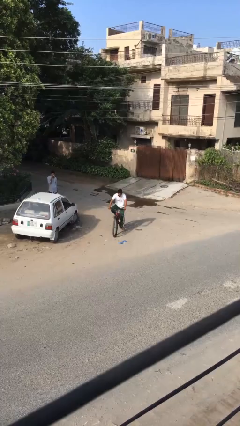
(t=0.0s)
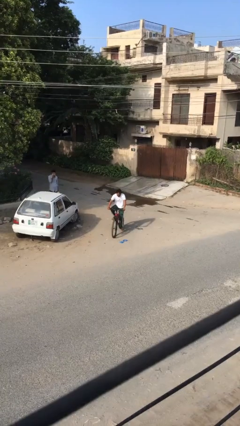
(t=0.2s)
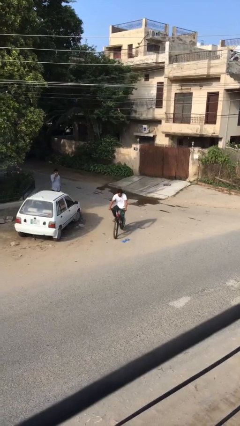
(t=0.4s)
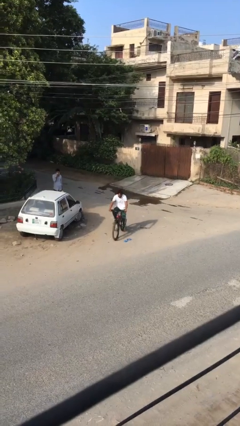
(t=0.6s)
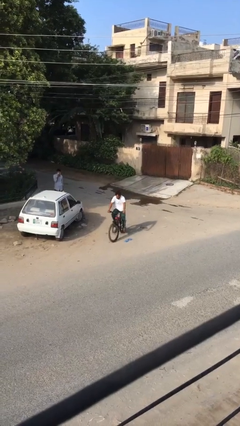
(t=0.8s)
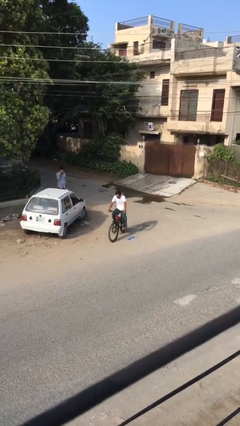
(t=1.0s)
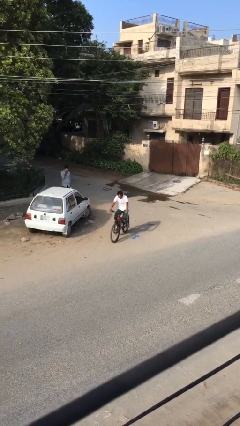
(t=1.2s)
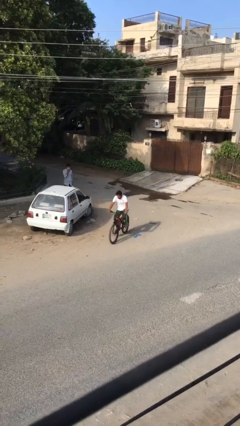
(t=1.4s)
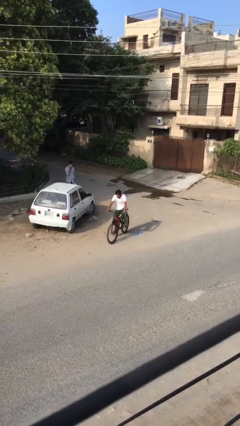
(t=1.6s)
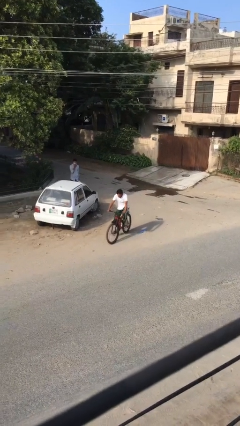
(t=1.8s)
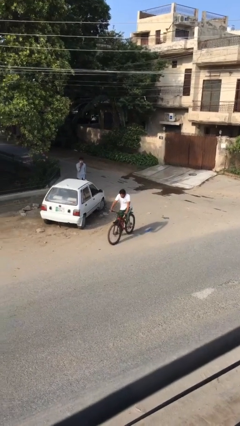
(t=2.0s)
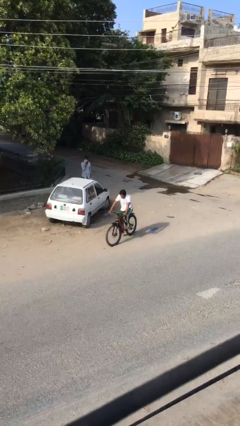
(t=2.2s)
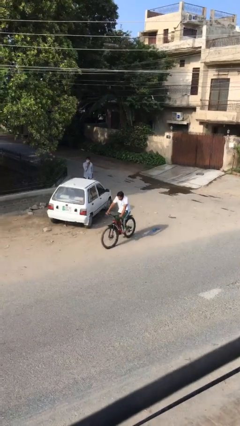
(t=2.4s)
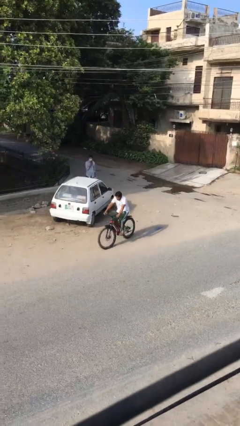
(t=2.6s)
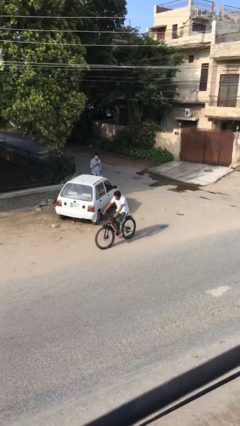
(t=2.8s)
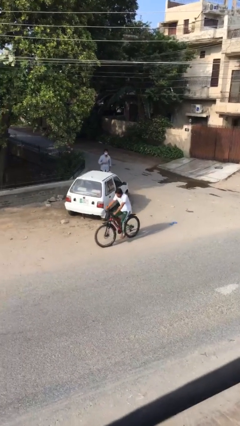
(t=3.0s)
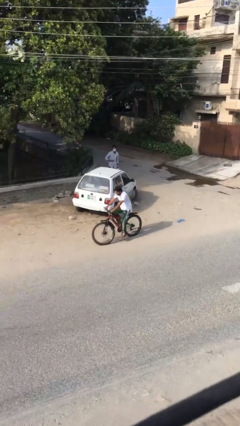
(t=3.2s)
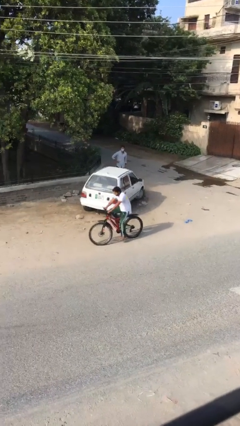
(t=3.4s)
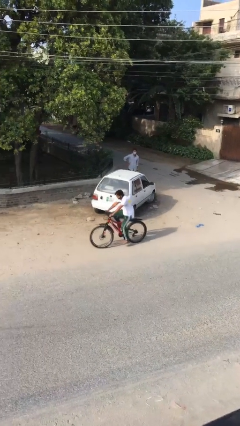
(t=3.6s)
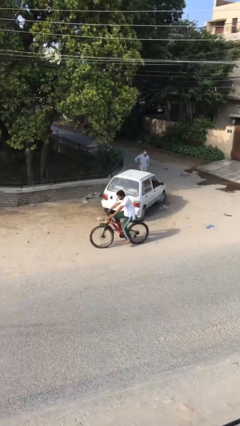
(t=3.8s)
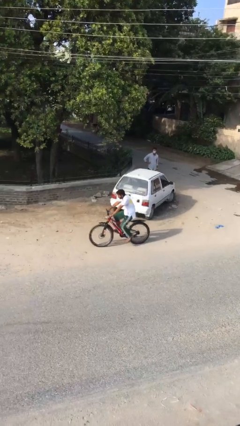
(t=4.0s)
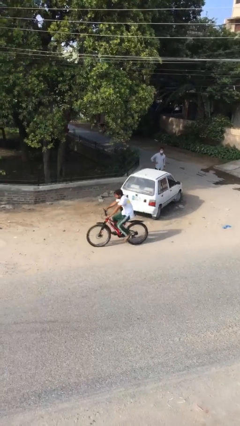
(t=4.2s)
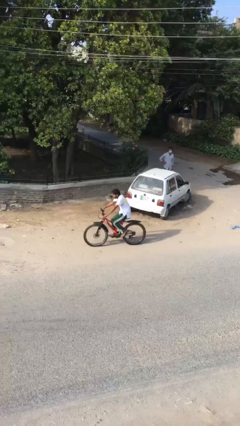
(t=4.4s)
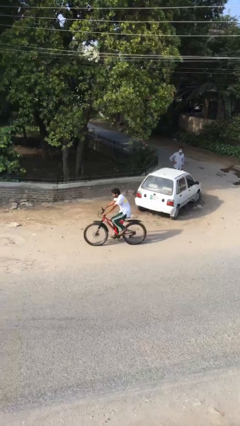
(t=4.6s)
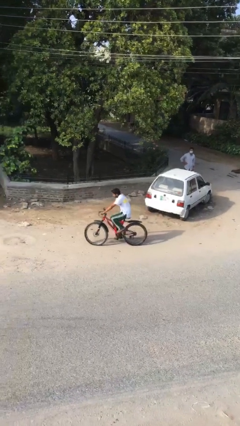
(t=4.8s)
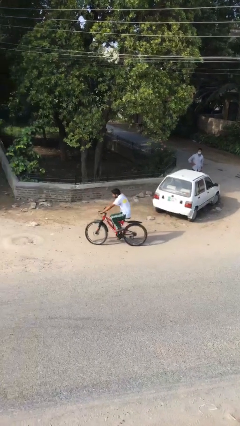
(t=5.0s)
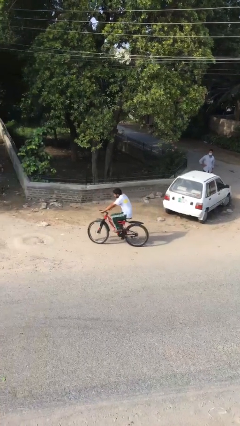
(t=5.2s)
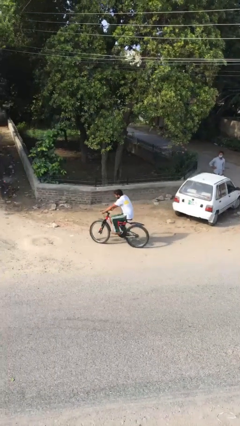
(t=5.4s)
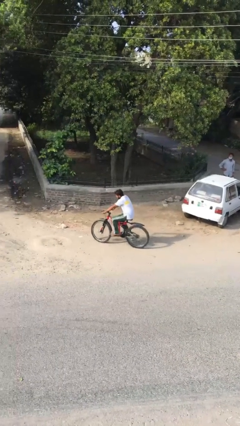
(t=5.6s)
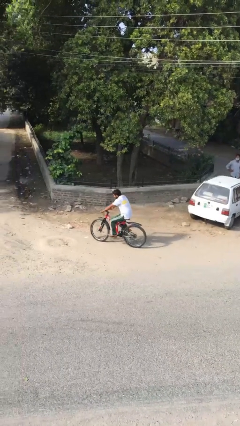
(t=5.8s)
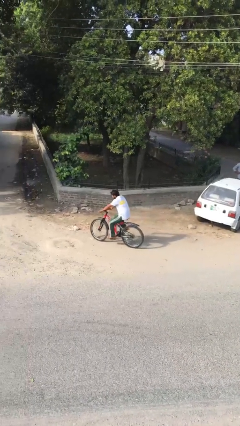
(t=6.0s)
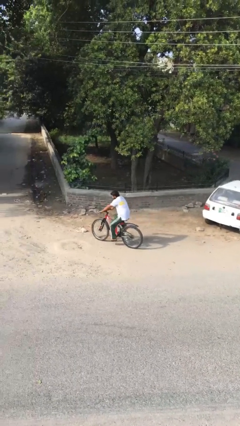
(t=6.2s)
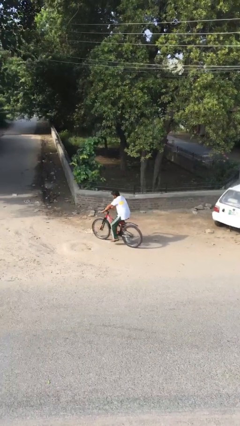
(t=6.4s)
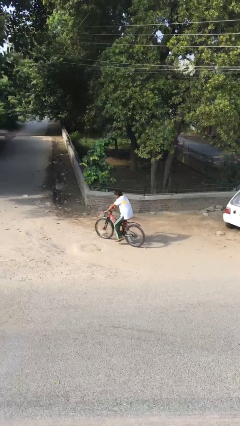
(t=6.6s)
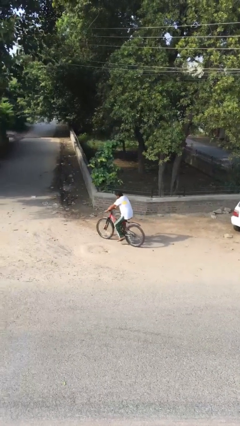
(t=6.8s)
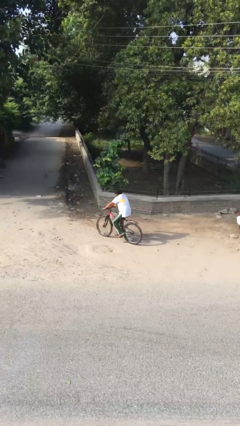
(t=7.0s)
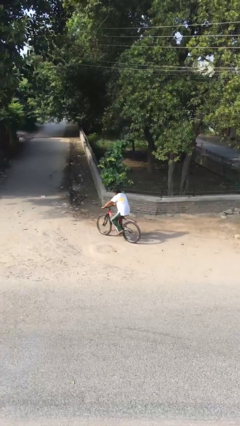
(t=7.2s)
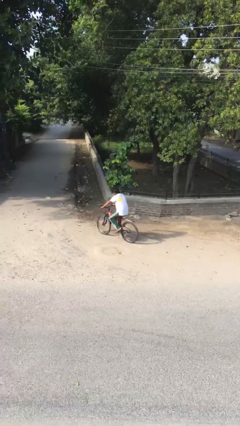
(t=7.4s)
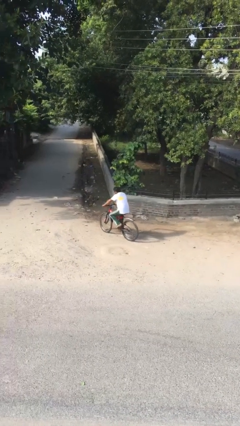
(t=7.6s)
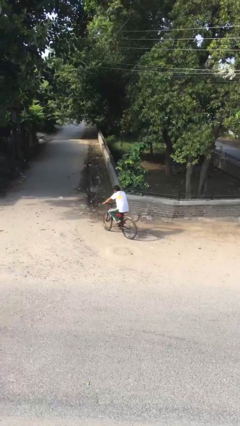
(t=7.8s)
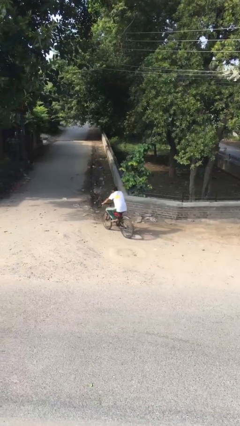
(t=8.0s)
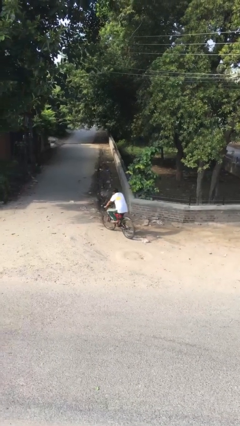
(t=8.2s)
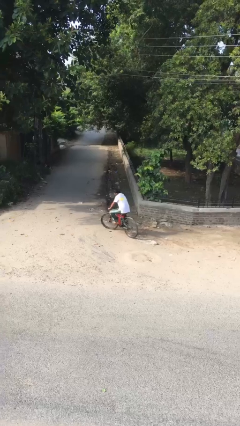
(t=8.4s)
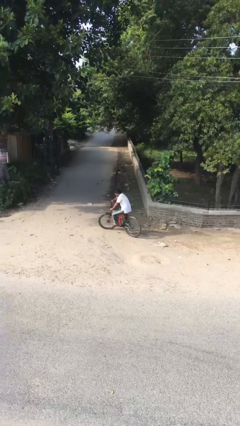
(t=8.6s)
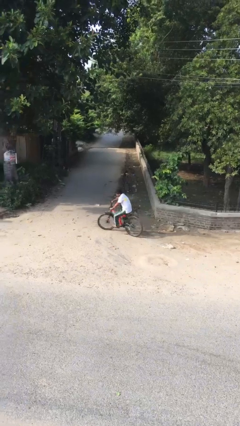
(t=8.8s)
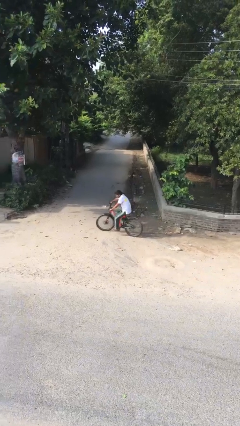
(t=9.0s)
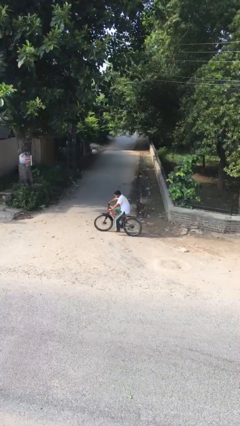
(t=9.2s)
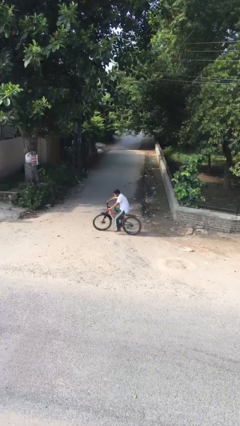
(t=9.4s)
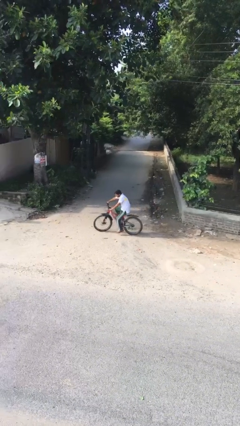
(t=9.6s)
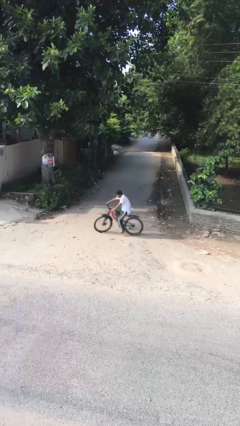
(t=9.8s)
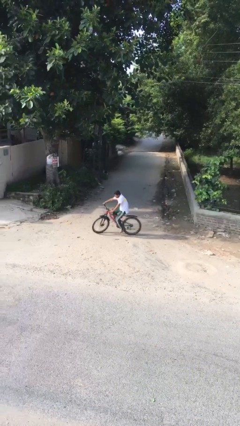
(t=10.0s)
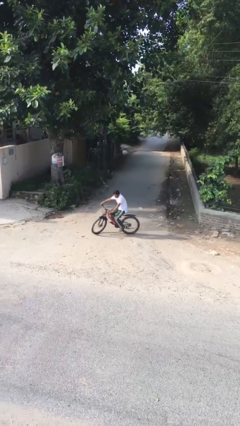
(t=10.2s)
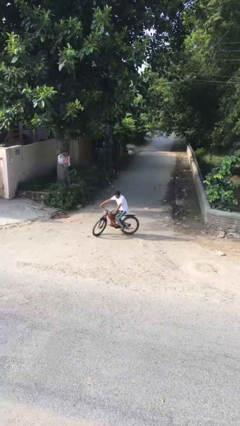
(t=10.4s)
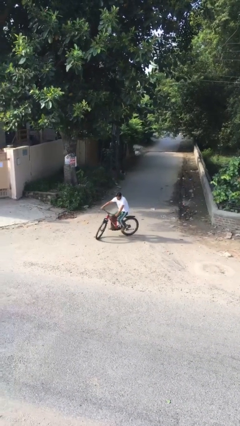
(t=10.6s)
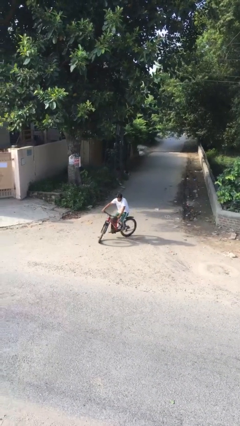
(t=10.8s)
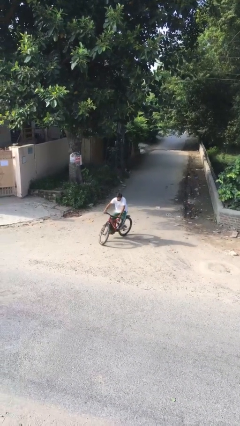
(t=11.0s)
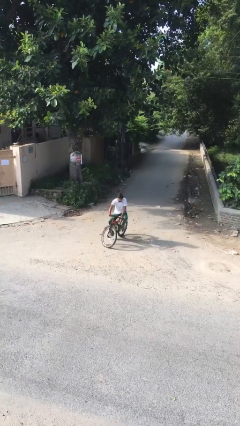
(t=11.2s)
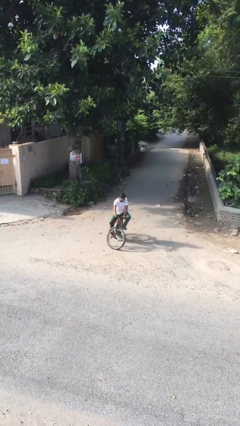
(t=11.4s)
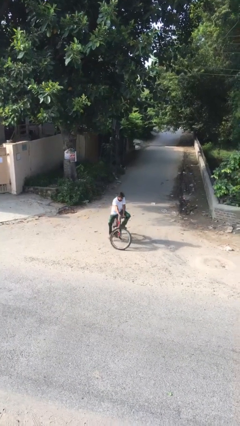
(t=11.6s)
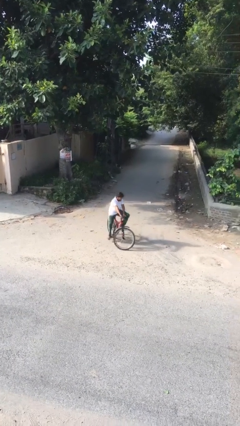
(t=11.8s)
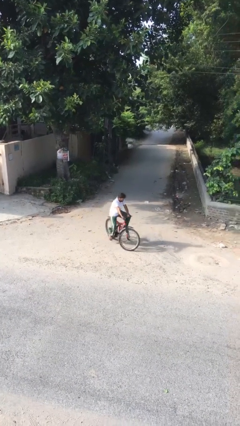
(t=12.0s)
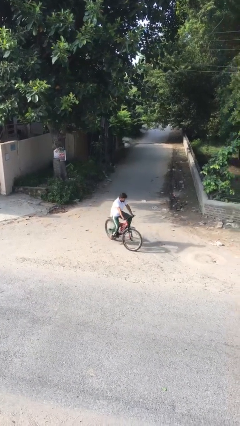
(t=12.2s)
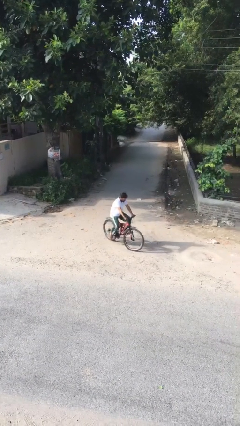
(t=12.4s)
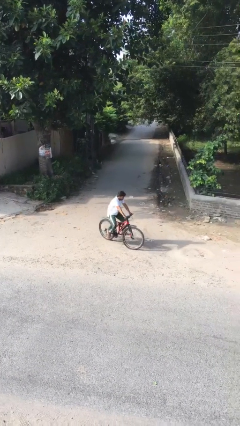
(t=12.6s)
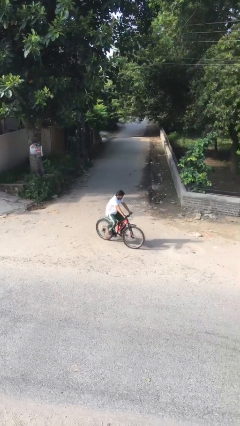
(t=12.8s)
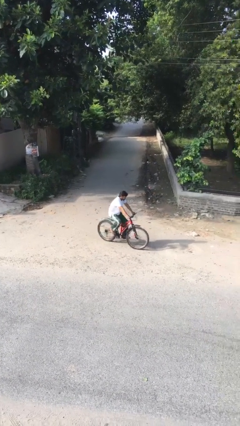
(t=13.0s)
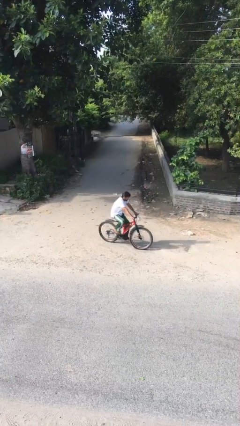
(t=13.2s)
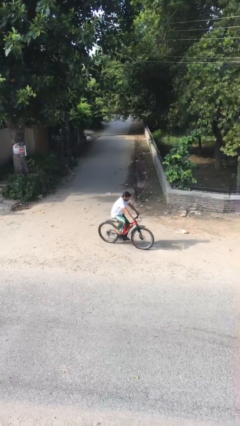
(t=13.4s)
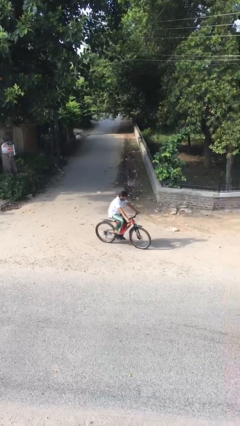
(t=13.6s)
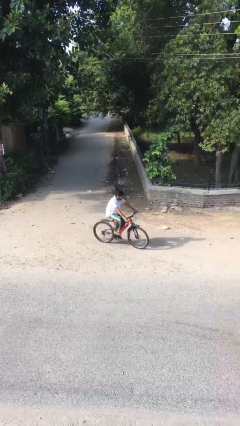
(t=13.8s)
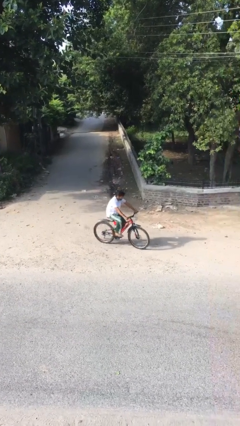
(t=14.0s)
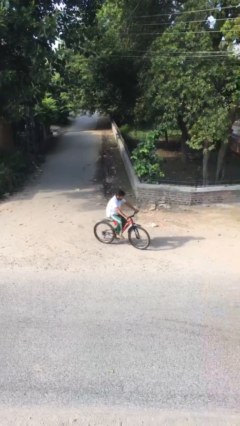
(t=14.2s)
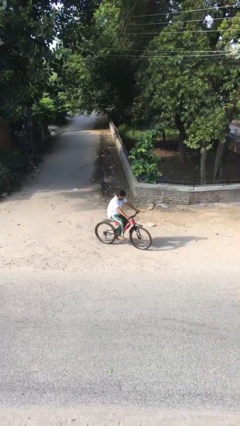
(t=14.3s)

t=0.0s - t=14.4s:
person rides bicycle

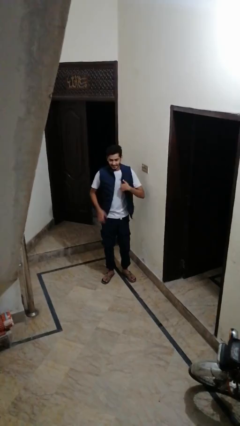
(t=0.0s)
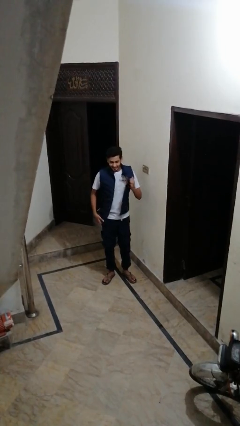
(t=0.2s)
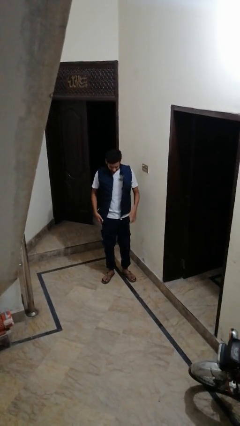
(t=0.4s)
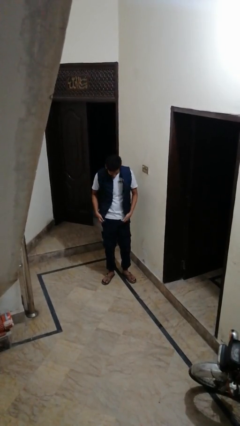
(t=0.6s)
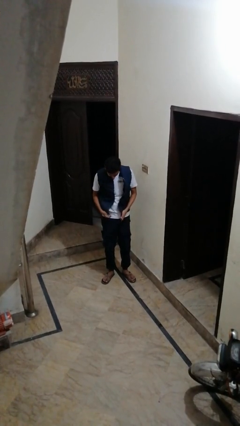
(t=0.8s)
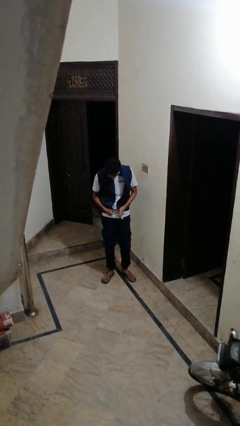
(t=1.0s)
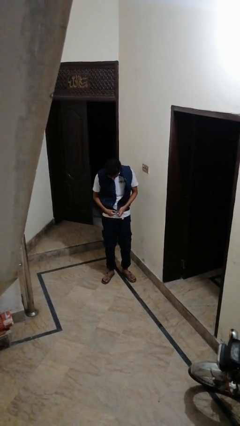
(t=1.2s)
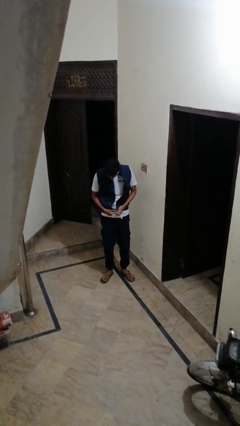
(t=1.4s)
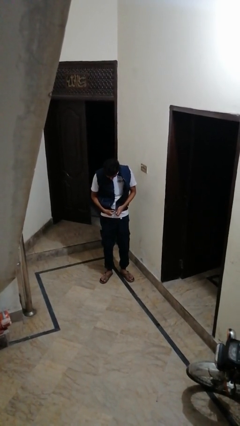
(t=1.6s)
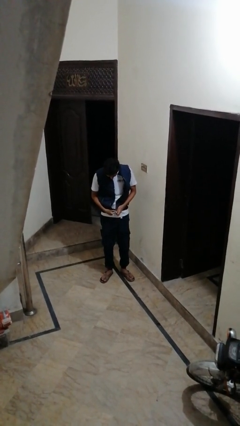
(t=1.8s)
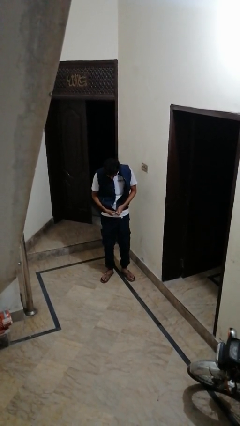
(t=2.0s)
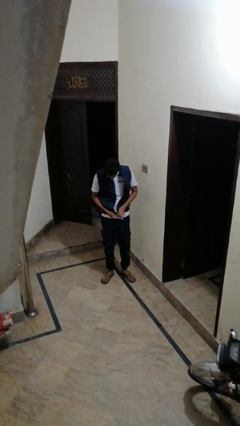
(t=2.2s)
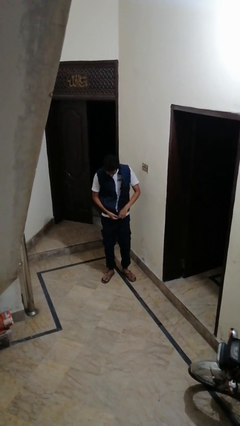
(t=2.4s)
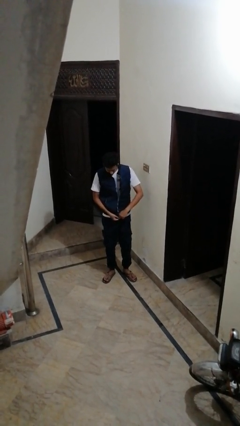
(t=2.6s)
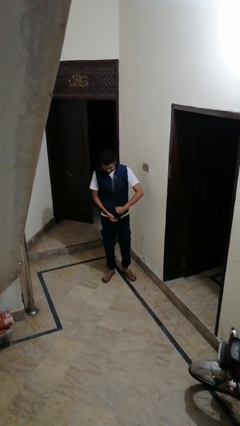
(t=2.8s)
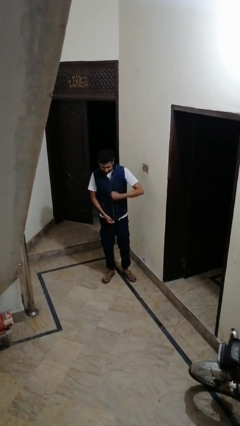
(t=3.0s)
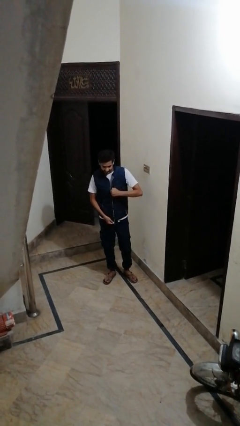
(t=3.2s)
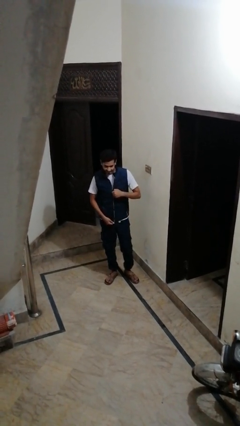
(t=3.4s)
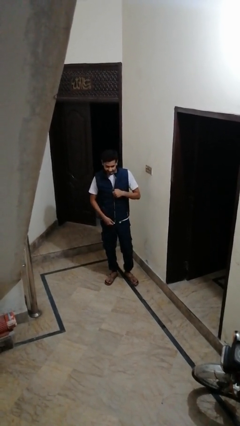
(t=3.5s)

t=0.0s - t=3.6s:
person zips up jacket

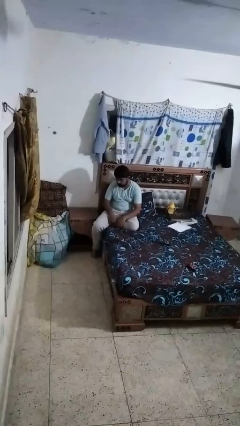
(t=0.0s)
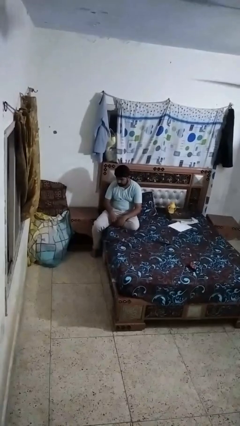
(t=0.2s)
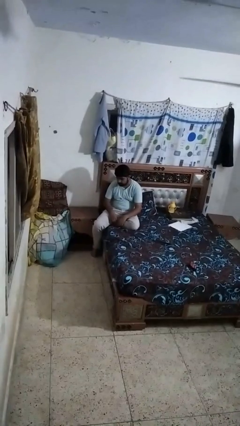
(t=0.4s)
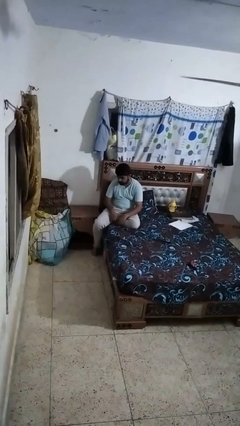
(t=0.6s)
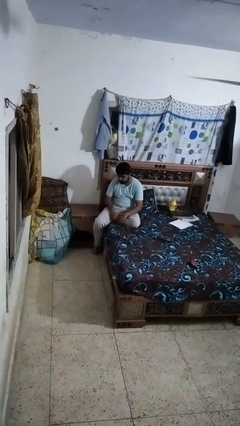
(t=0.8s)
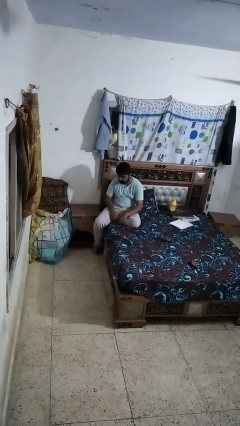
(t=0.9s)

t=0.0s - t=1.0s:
person taps object with finger
